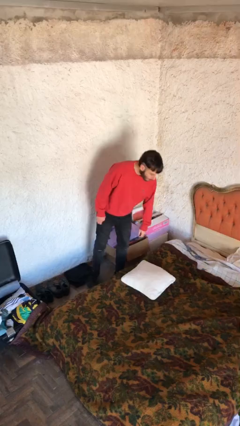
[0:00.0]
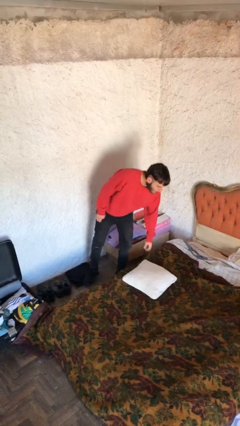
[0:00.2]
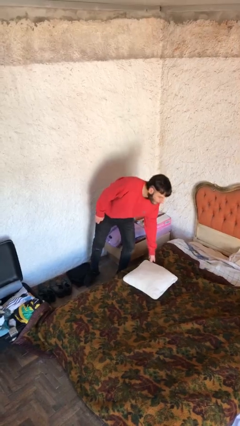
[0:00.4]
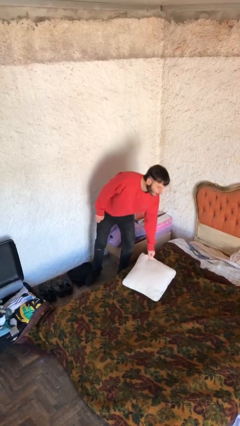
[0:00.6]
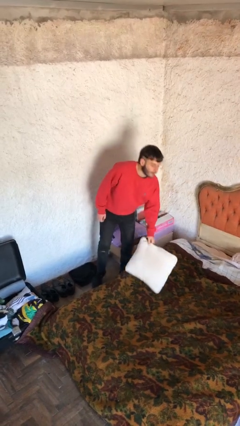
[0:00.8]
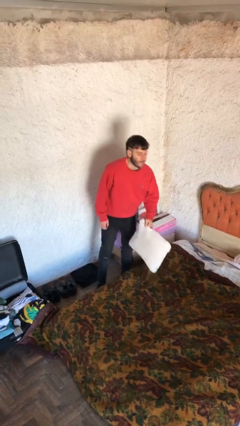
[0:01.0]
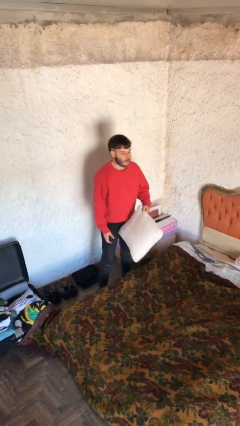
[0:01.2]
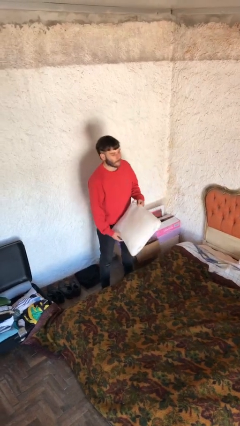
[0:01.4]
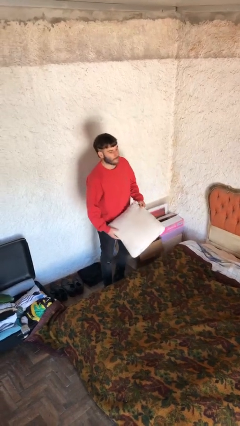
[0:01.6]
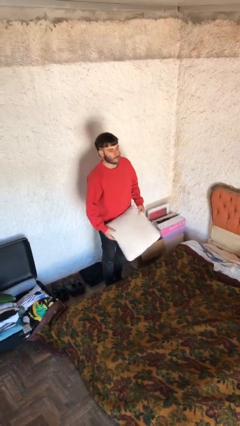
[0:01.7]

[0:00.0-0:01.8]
person picks up object from bed

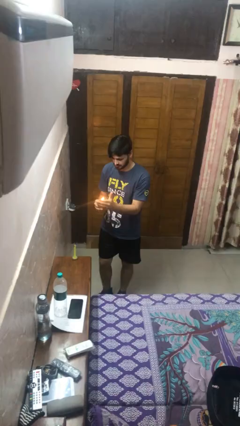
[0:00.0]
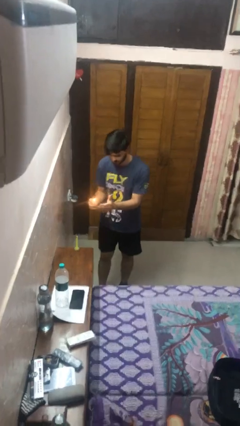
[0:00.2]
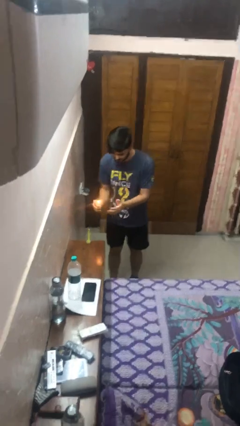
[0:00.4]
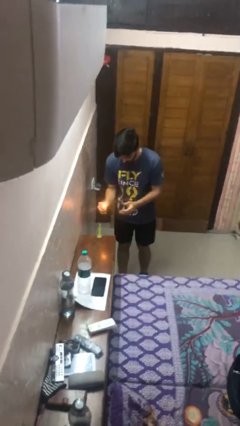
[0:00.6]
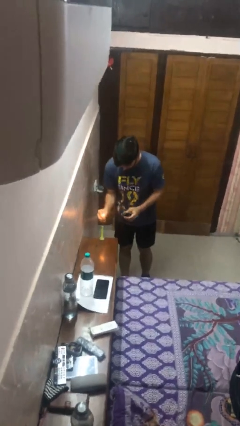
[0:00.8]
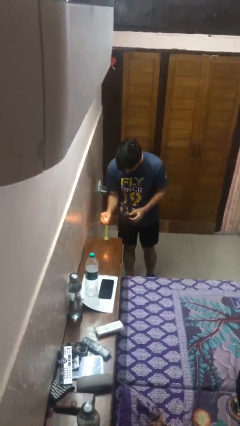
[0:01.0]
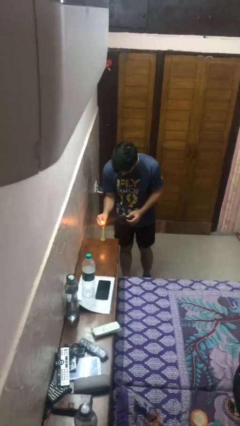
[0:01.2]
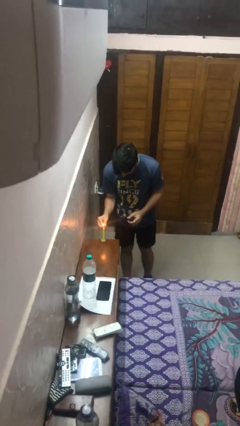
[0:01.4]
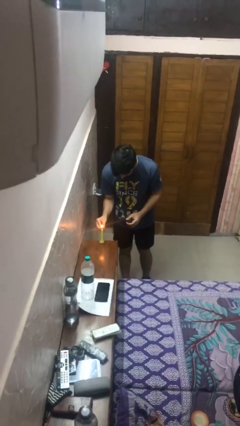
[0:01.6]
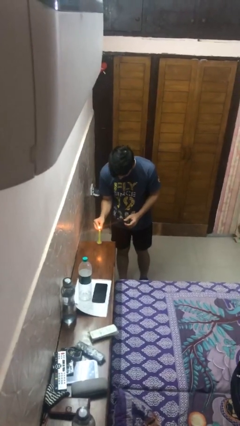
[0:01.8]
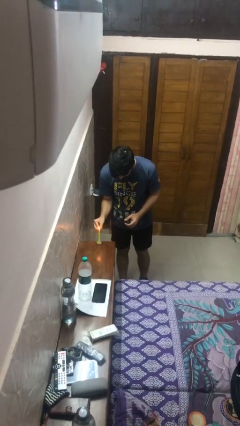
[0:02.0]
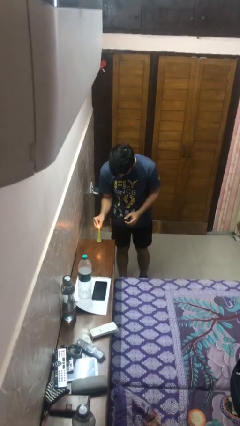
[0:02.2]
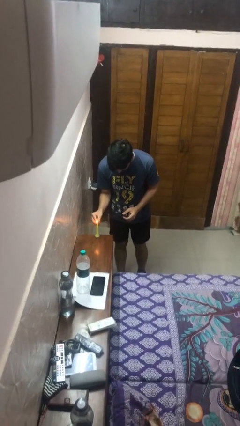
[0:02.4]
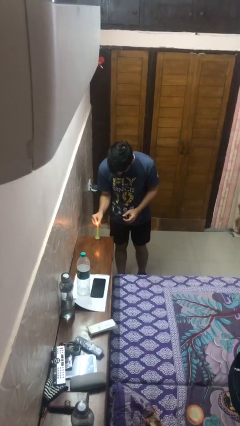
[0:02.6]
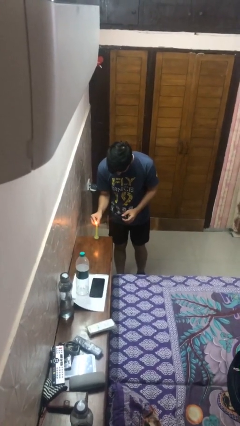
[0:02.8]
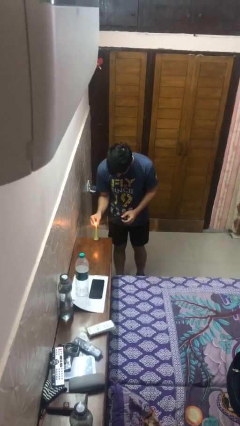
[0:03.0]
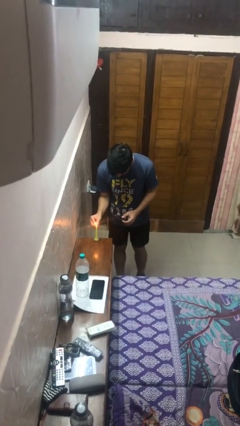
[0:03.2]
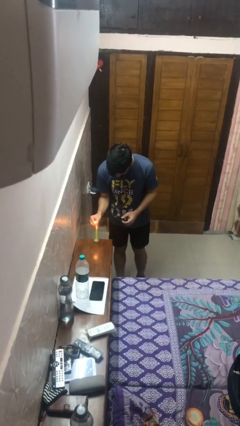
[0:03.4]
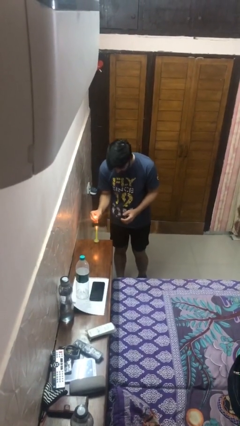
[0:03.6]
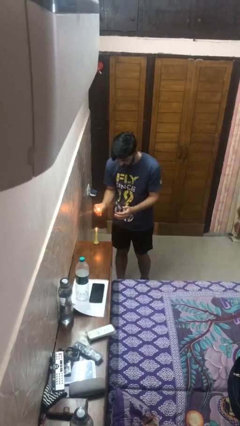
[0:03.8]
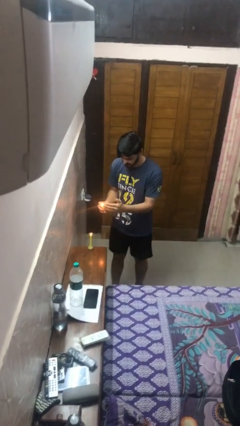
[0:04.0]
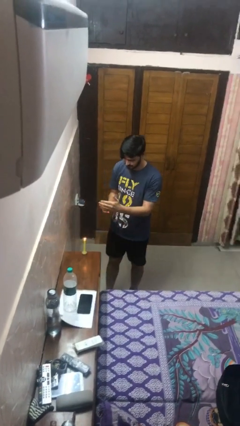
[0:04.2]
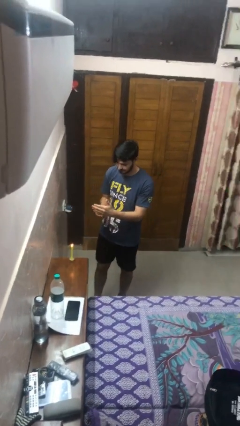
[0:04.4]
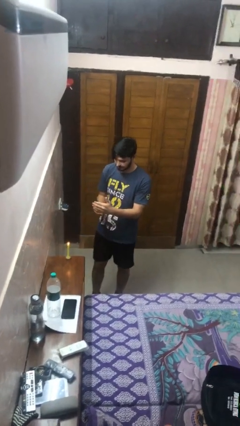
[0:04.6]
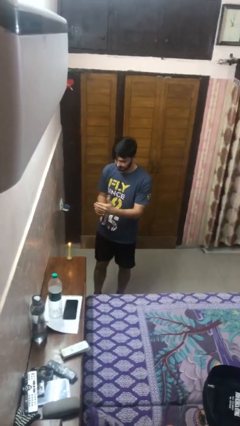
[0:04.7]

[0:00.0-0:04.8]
person lights candle

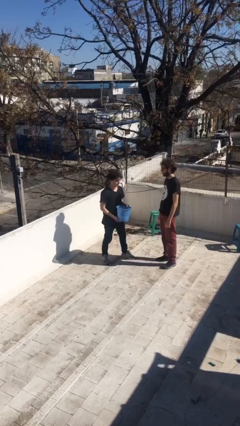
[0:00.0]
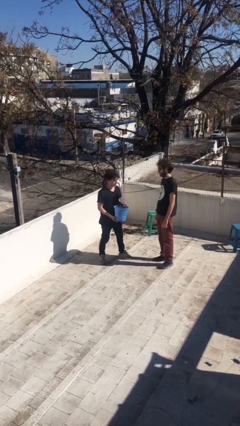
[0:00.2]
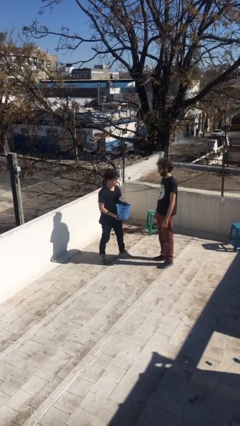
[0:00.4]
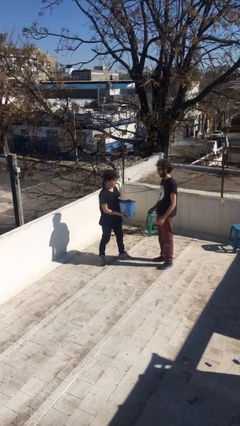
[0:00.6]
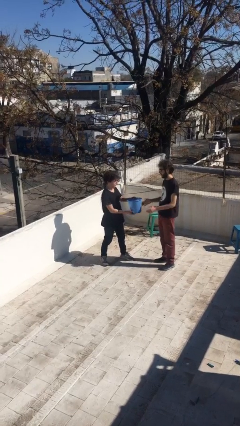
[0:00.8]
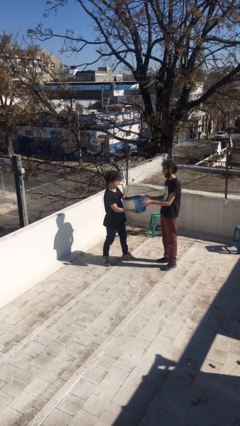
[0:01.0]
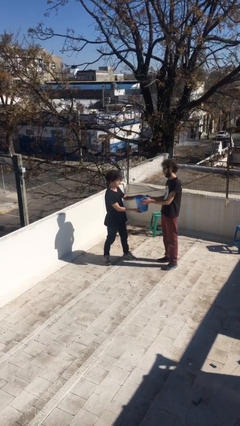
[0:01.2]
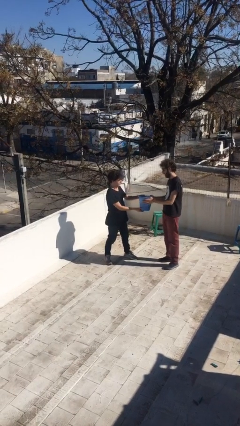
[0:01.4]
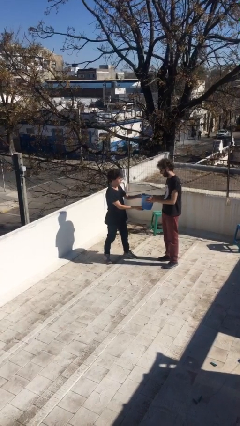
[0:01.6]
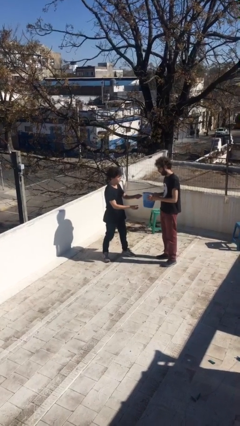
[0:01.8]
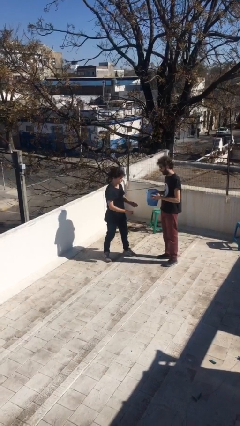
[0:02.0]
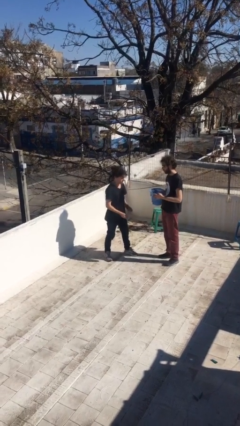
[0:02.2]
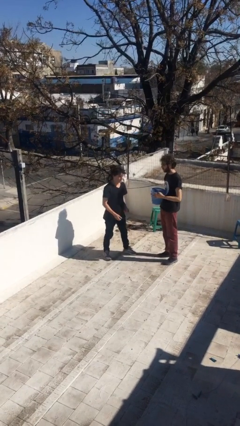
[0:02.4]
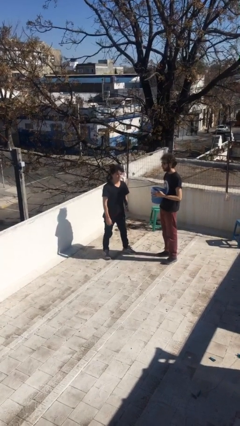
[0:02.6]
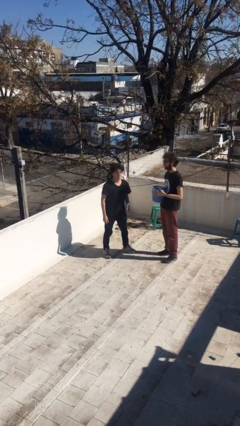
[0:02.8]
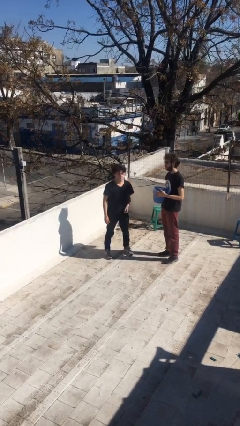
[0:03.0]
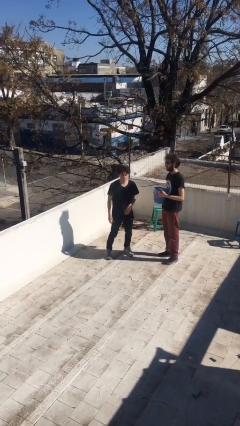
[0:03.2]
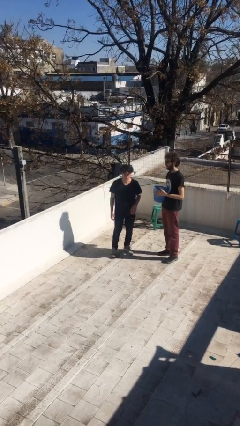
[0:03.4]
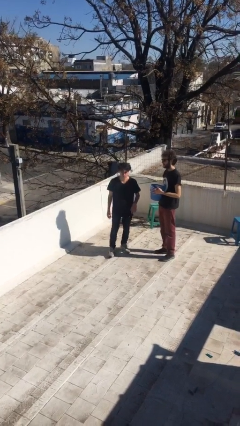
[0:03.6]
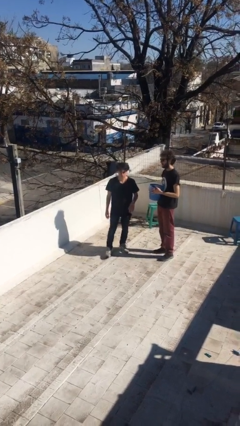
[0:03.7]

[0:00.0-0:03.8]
person transfers object to person

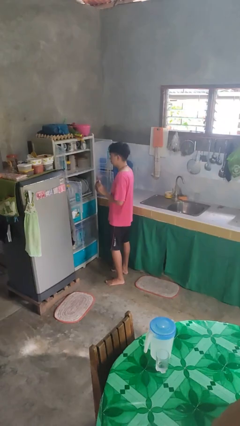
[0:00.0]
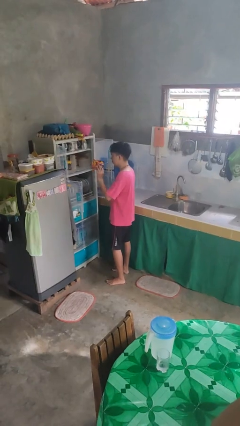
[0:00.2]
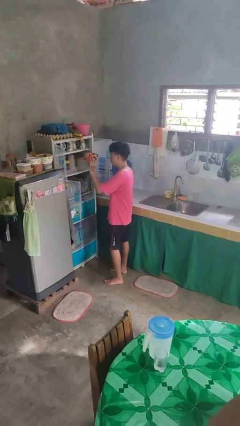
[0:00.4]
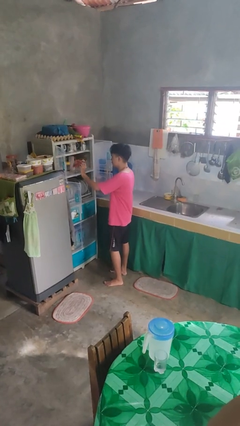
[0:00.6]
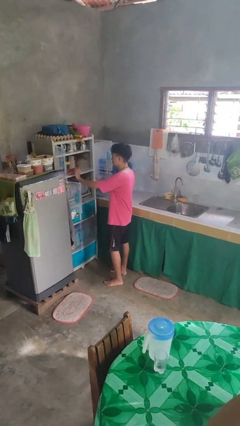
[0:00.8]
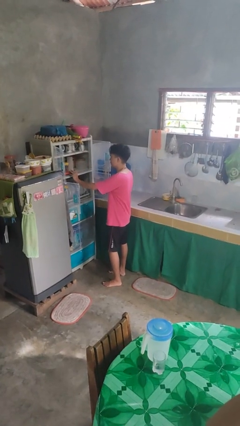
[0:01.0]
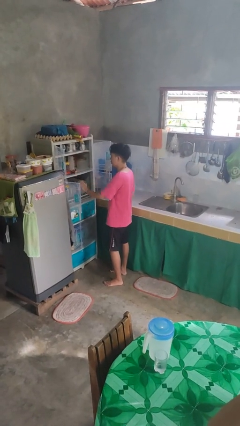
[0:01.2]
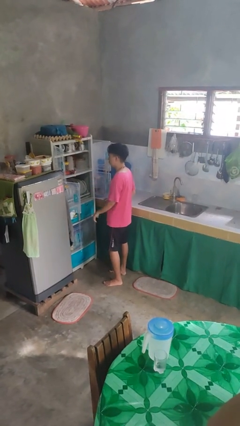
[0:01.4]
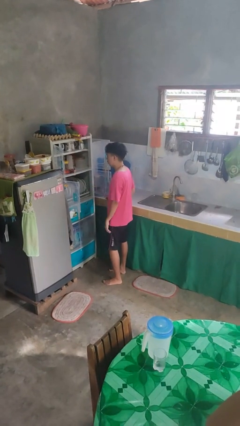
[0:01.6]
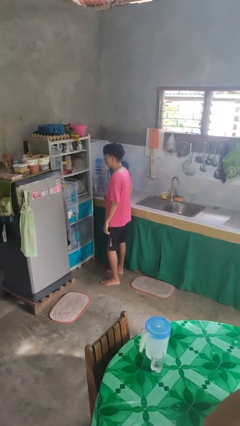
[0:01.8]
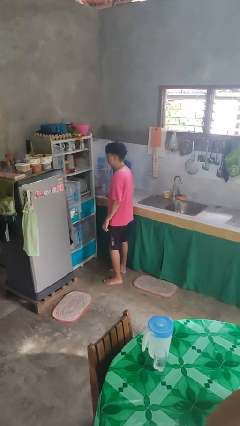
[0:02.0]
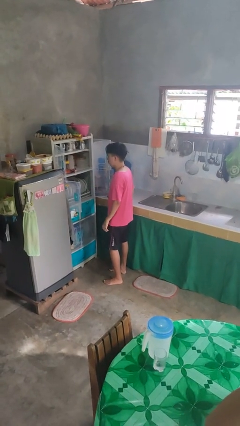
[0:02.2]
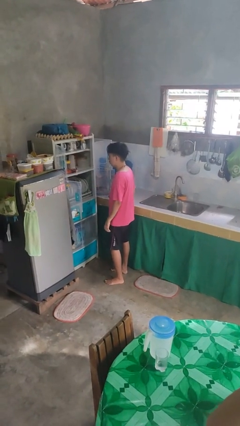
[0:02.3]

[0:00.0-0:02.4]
person puts object in cabinet

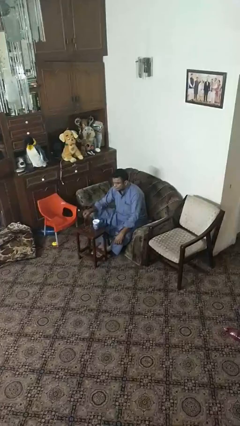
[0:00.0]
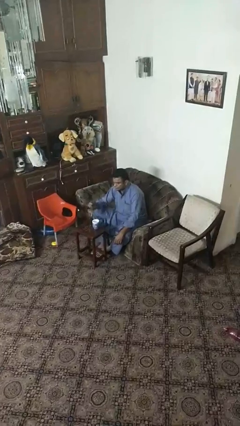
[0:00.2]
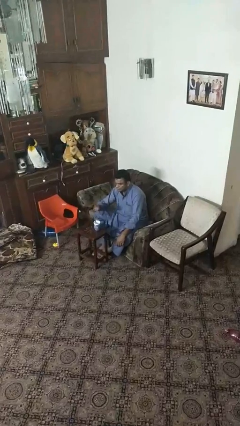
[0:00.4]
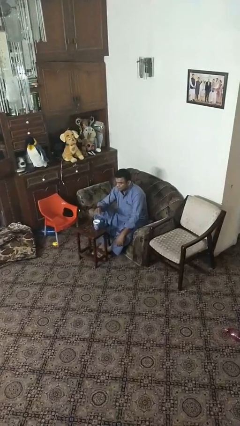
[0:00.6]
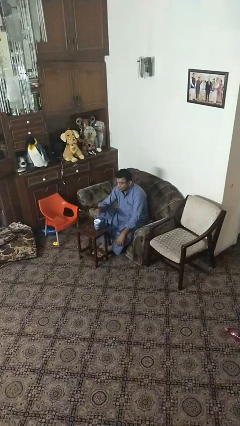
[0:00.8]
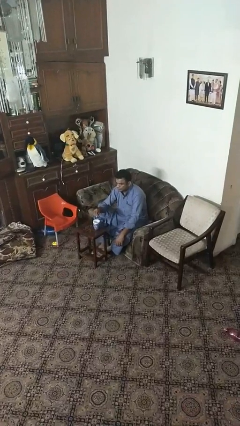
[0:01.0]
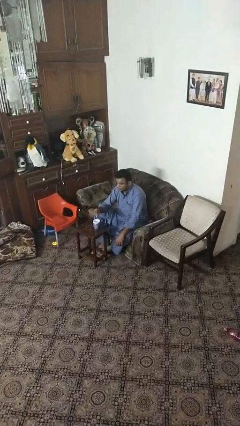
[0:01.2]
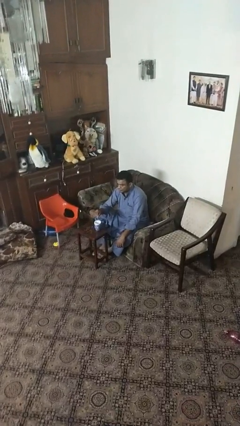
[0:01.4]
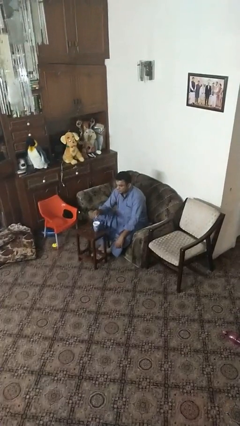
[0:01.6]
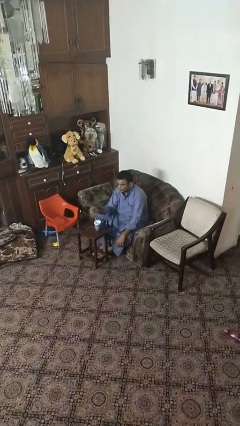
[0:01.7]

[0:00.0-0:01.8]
person stirs mug

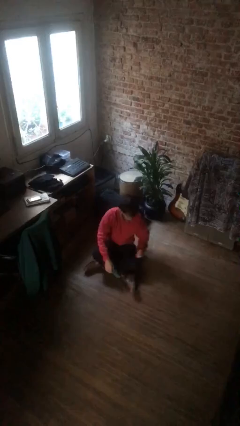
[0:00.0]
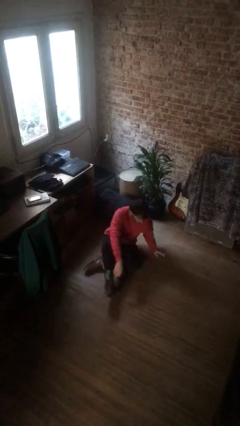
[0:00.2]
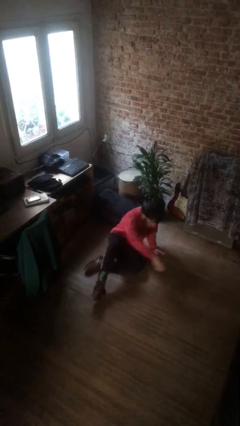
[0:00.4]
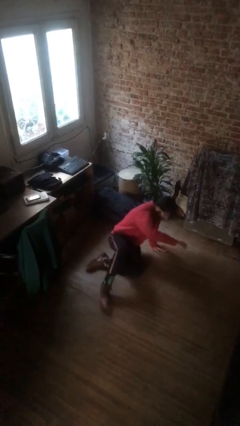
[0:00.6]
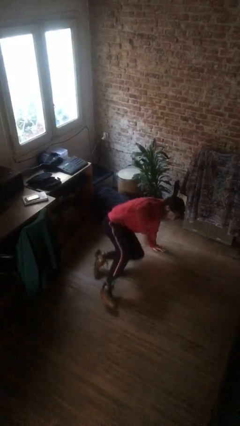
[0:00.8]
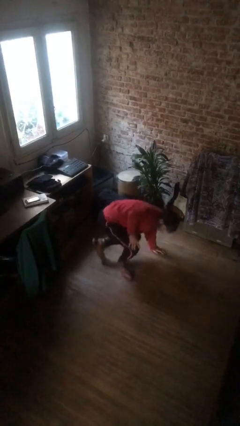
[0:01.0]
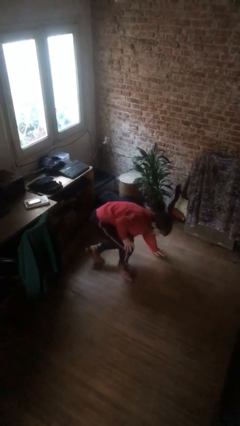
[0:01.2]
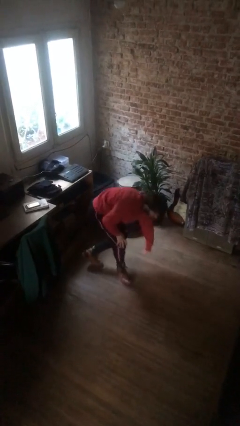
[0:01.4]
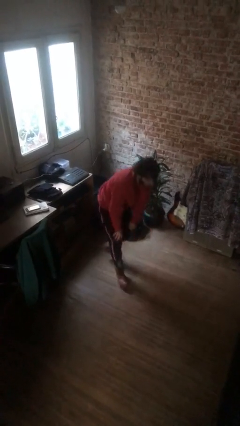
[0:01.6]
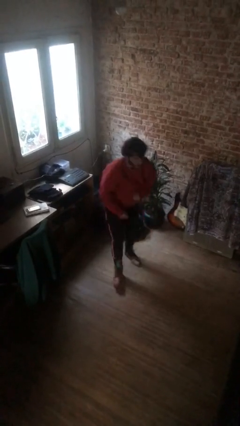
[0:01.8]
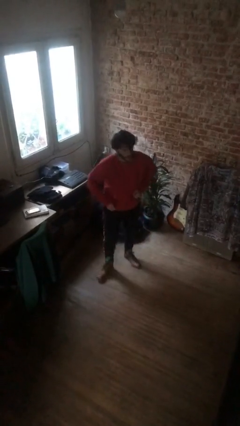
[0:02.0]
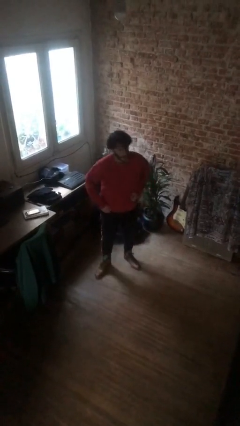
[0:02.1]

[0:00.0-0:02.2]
person stands up from floor

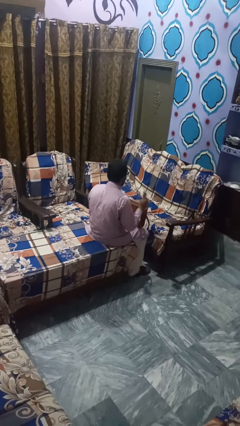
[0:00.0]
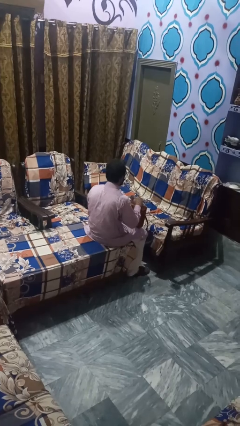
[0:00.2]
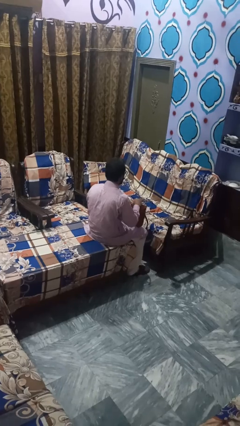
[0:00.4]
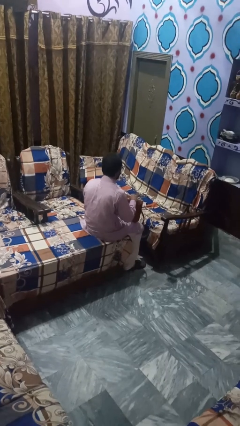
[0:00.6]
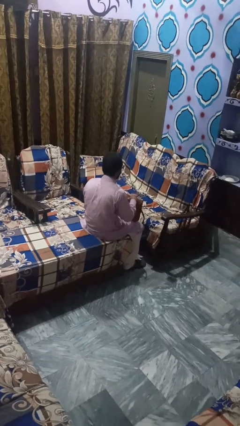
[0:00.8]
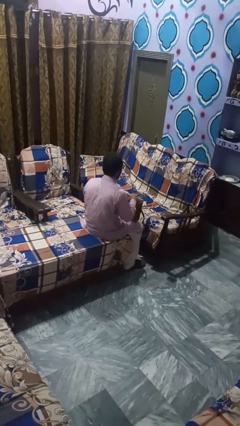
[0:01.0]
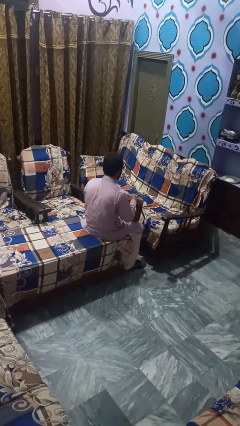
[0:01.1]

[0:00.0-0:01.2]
person takes object from bag
